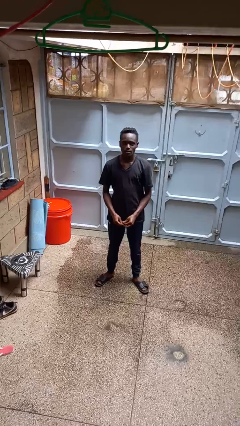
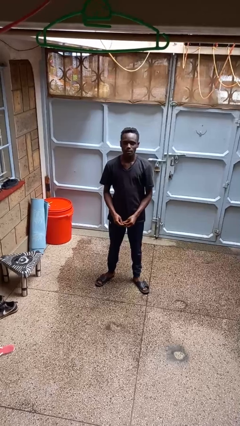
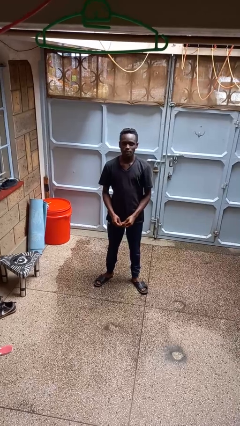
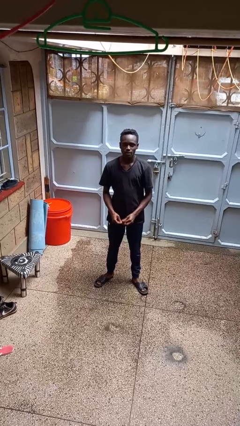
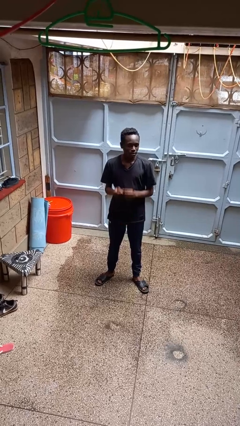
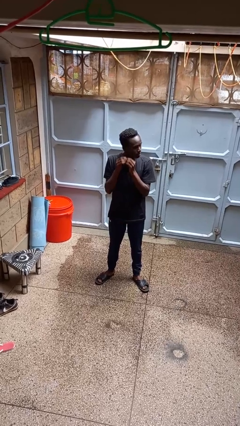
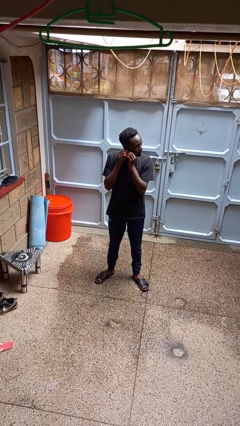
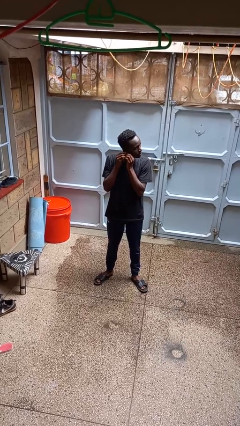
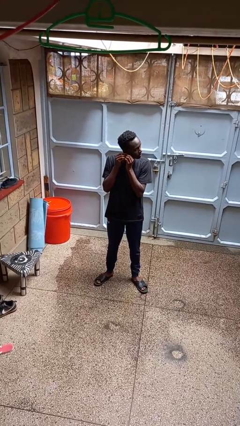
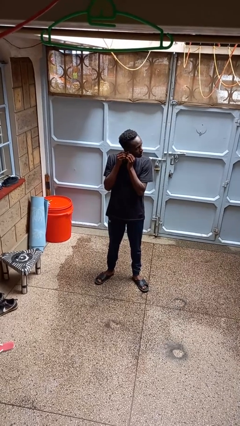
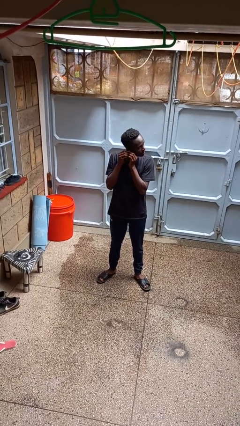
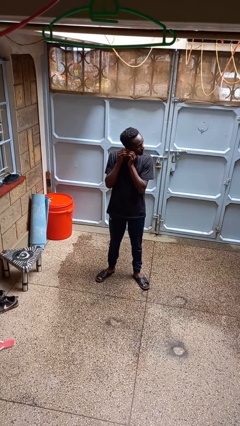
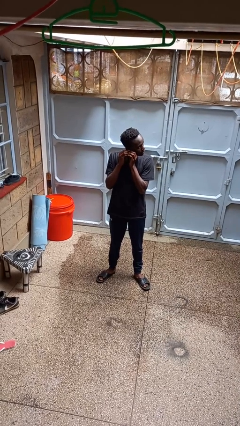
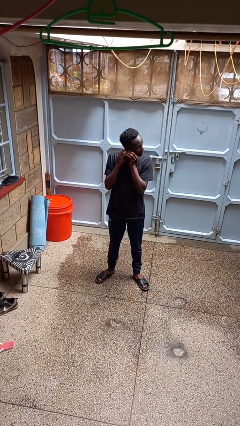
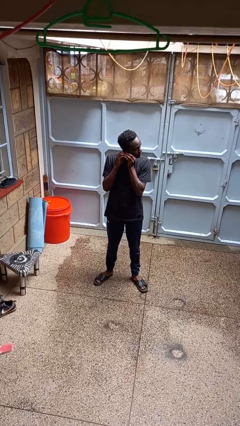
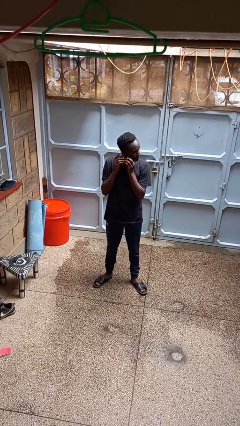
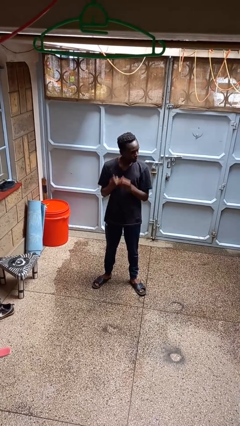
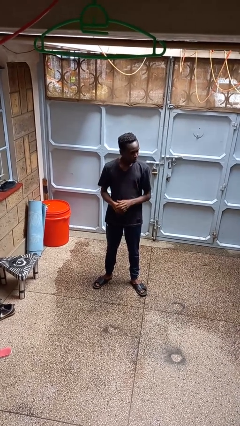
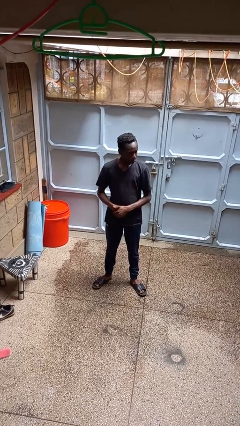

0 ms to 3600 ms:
person puts on earrings

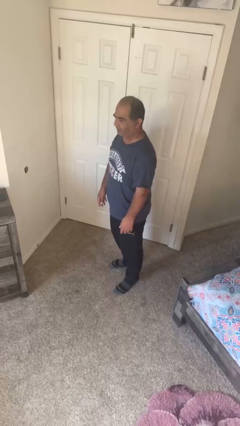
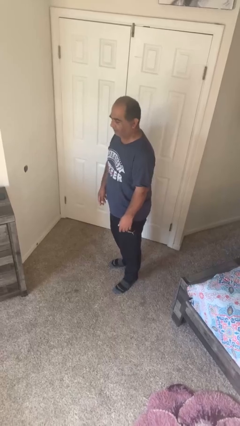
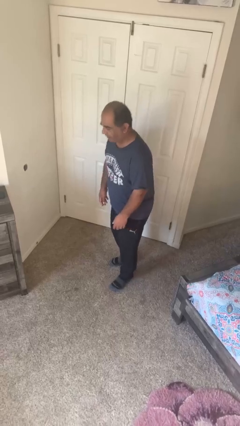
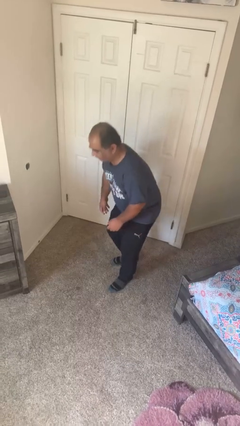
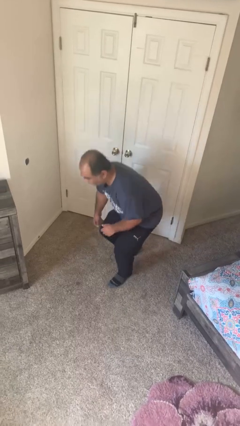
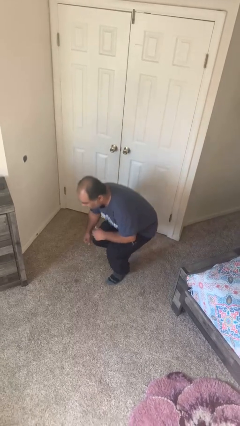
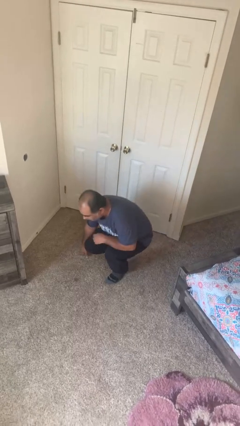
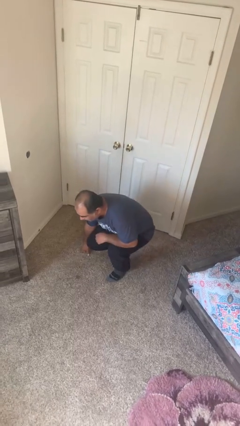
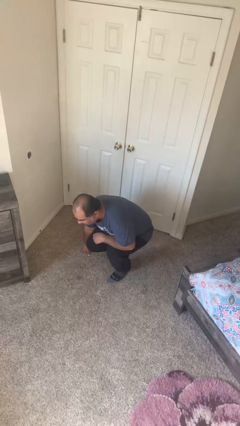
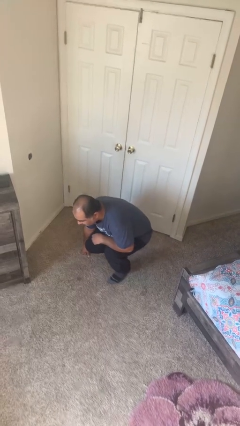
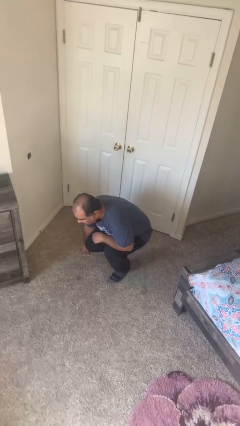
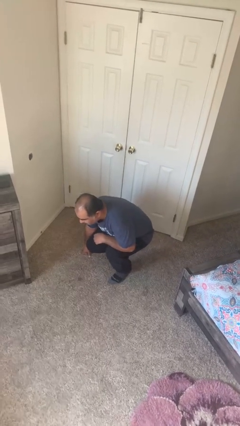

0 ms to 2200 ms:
person sits down

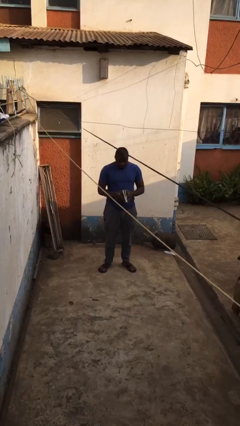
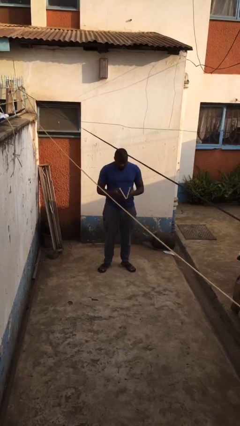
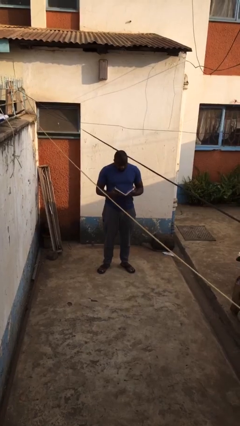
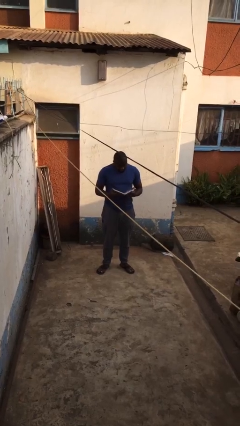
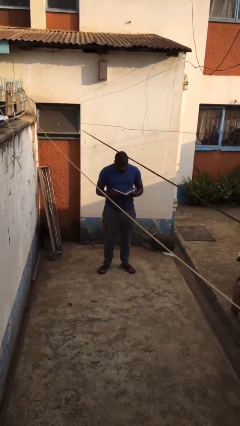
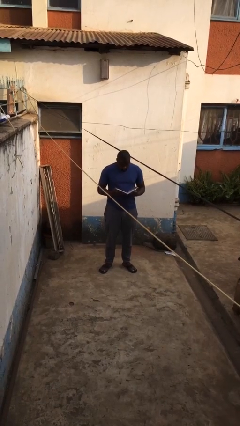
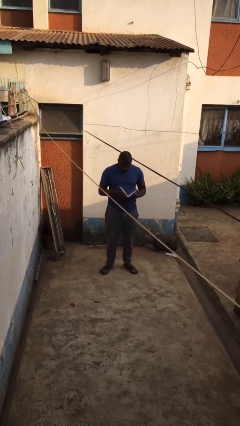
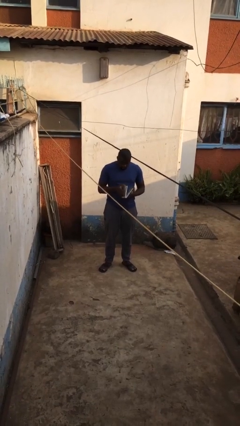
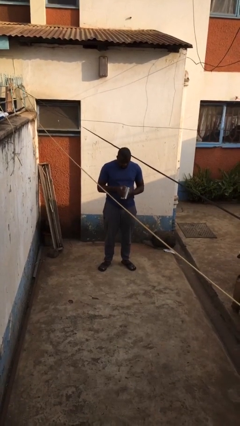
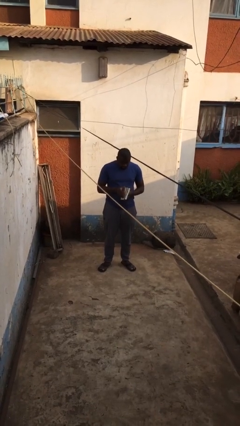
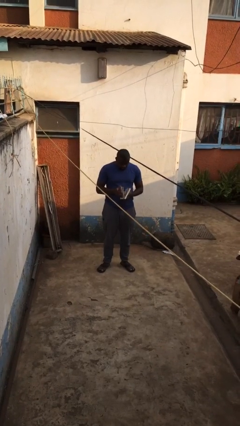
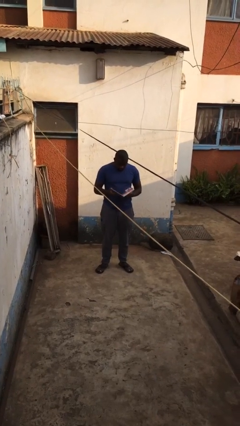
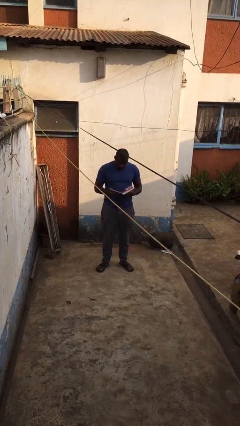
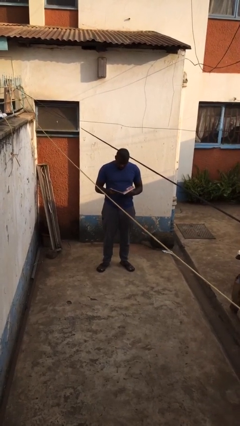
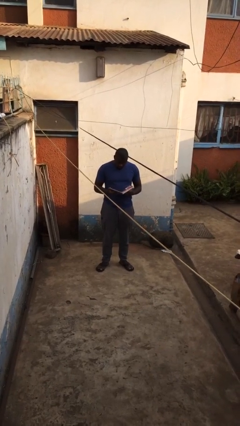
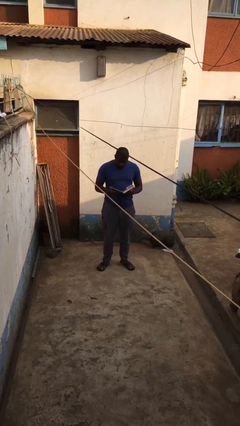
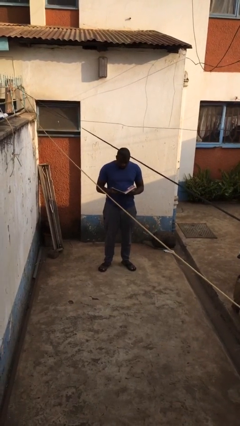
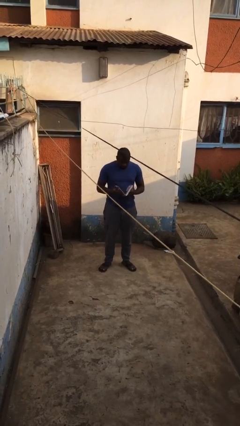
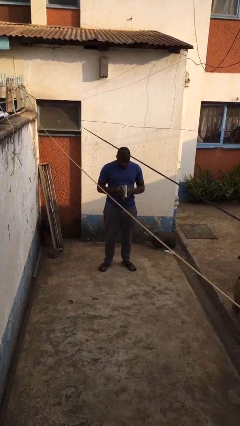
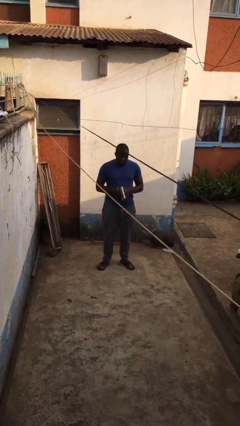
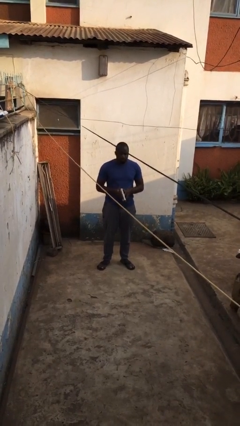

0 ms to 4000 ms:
person reads book

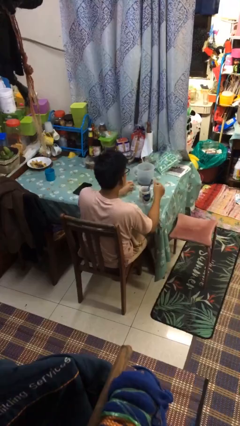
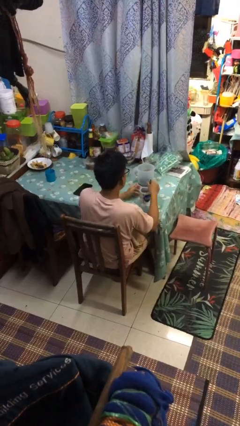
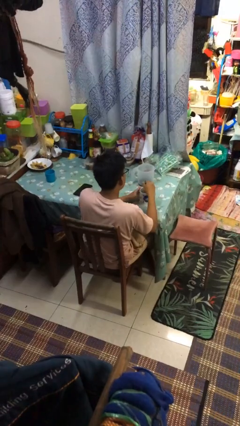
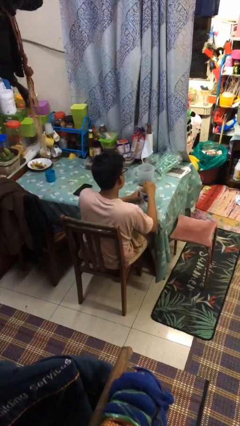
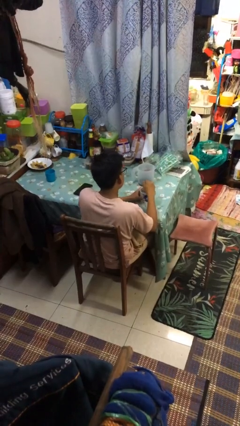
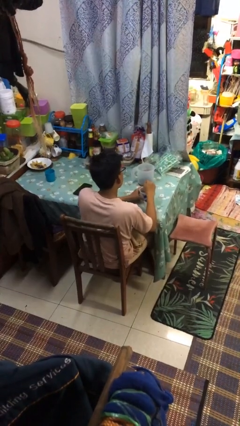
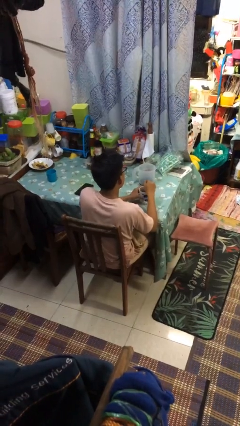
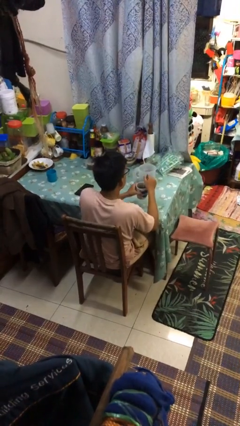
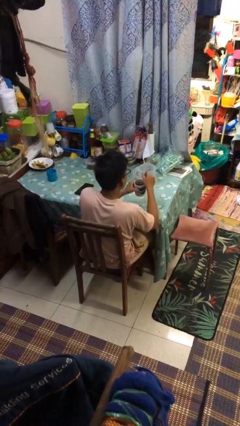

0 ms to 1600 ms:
person stirs mug

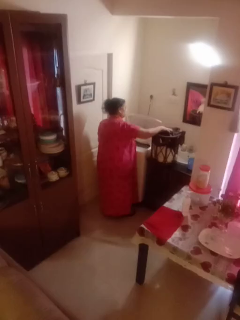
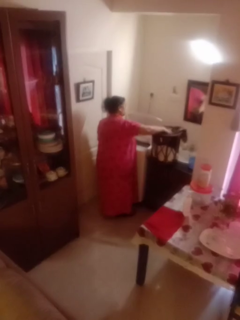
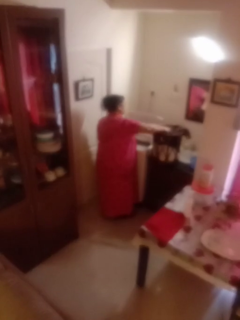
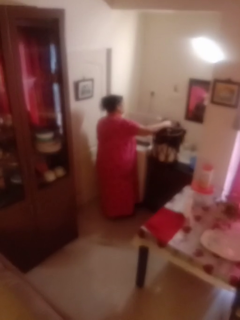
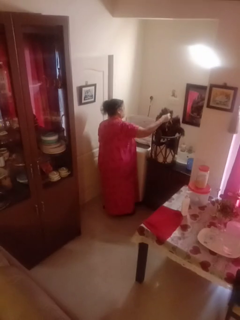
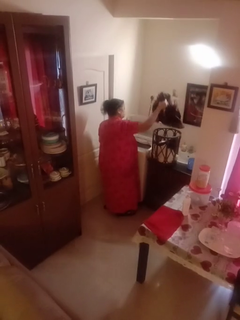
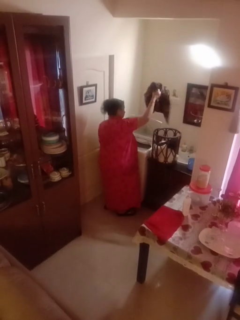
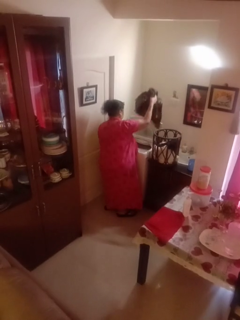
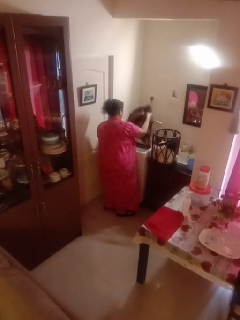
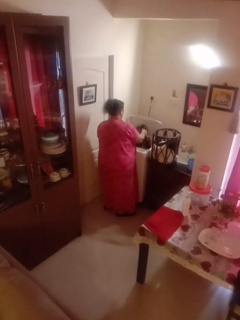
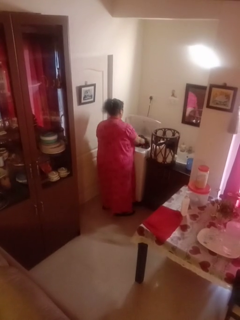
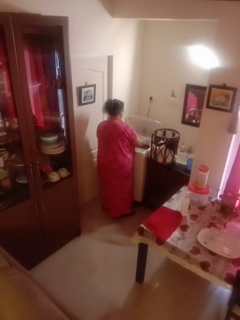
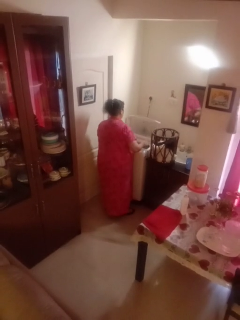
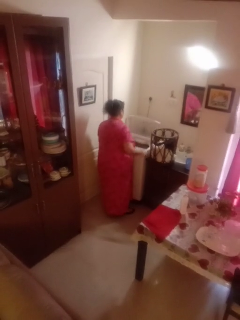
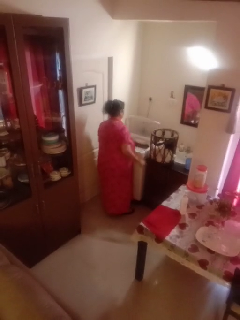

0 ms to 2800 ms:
person loads clotheswasher

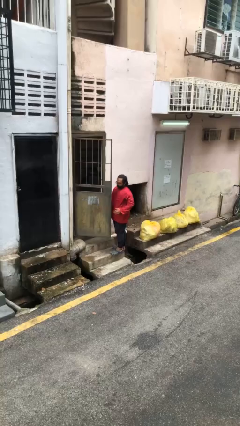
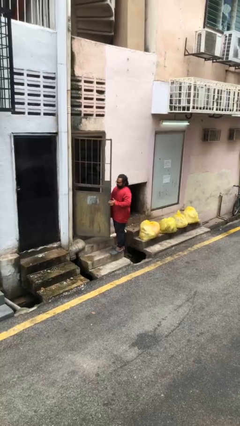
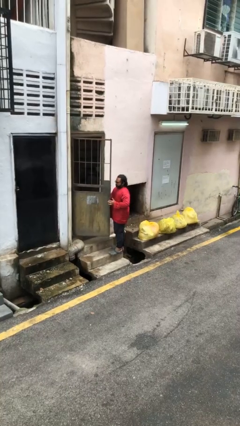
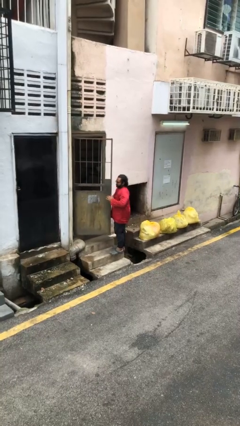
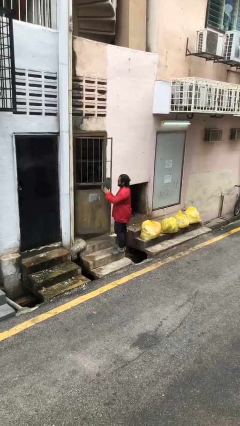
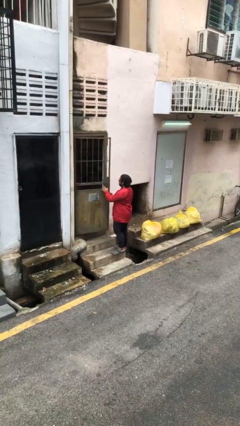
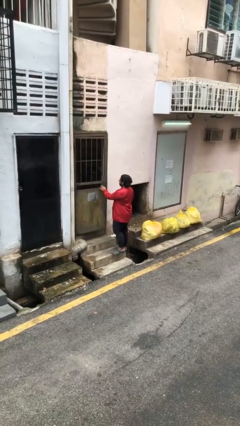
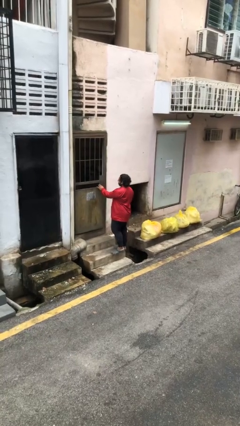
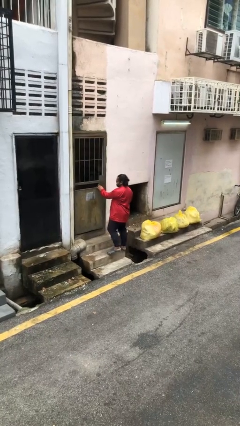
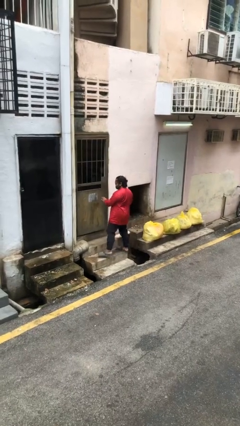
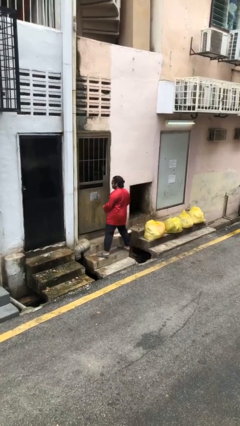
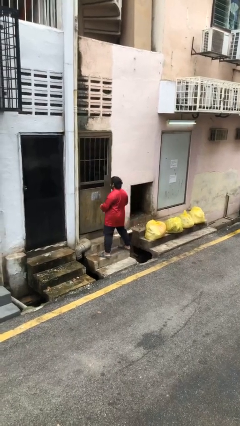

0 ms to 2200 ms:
person closes facility door

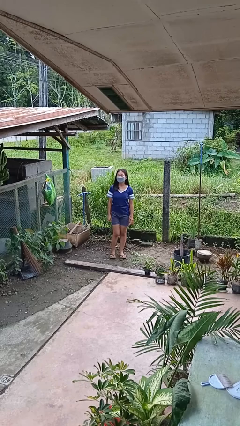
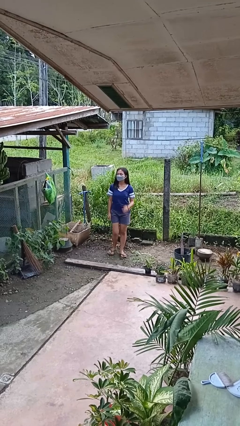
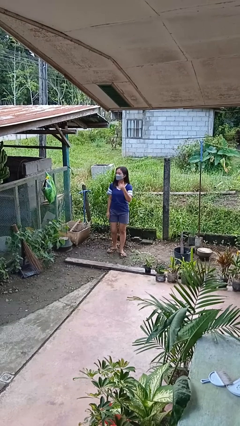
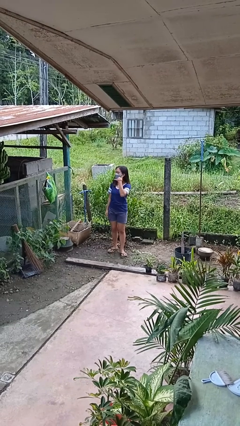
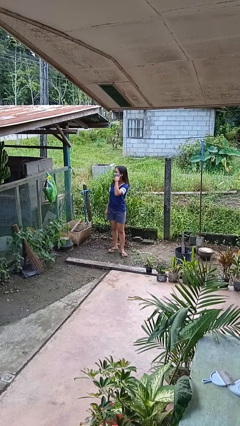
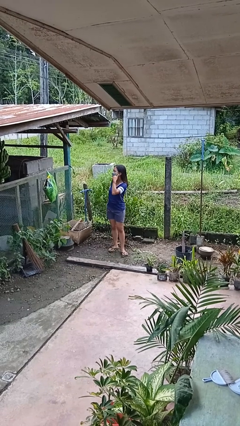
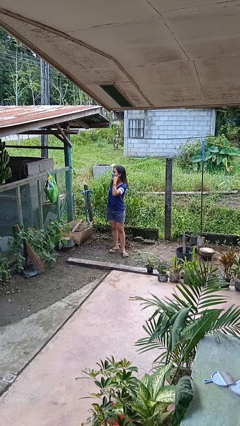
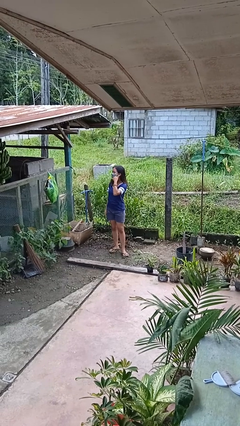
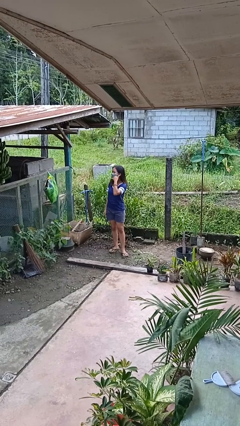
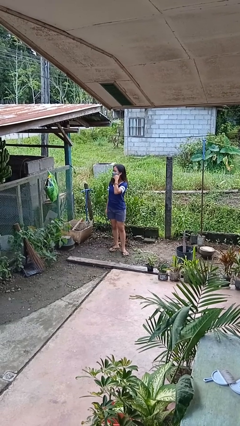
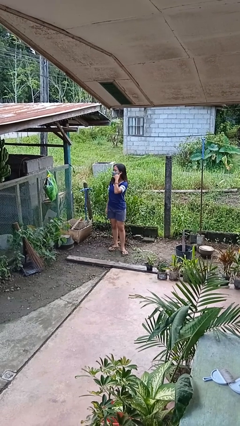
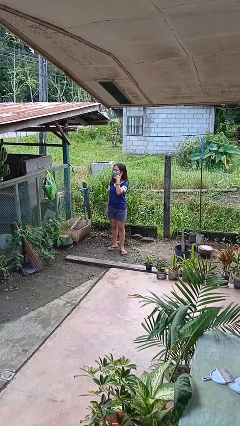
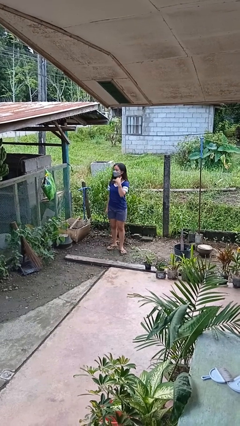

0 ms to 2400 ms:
person gestures call me
